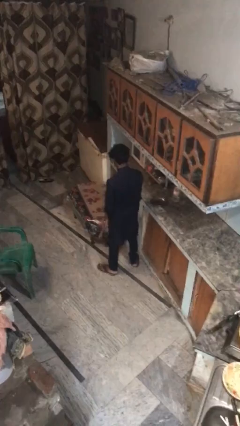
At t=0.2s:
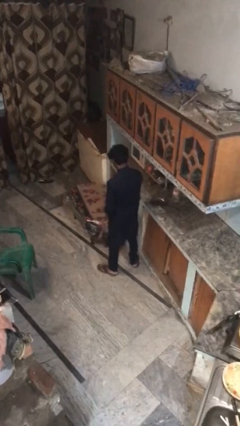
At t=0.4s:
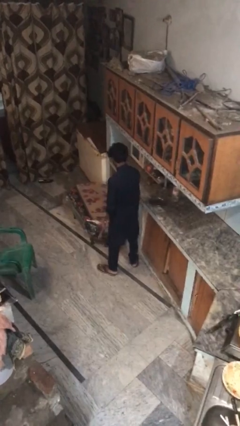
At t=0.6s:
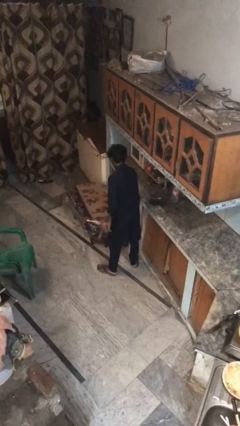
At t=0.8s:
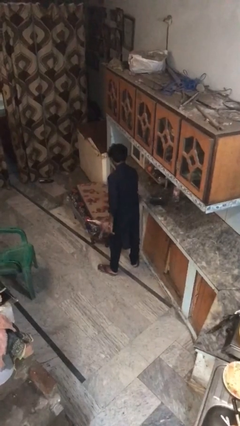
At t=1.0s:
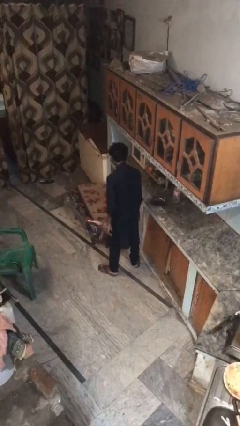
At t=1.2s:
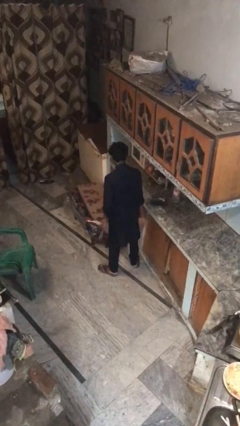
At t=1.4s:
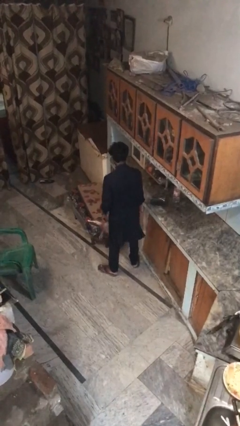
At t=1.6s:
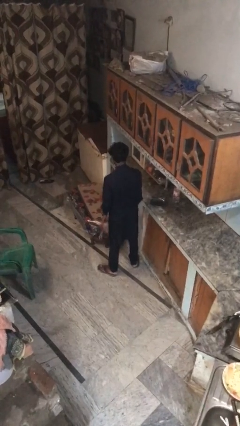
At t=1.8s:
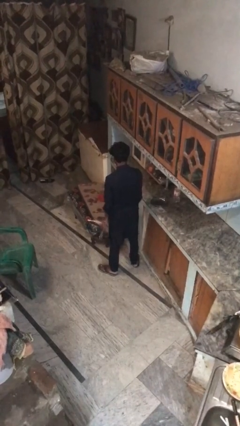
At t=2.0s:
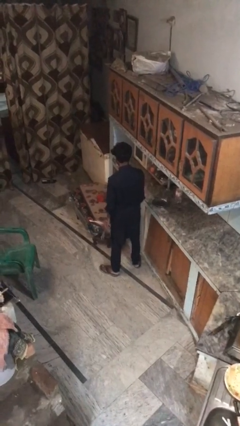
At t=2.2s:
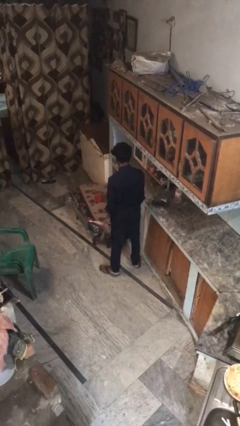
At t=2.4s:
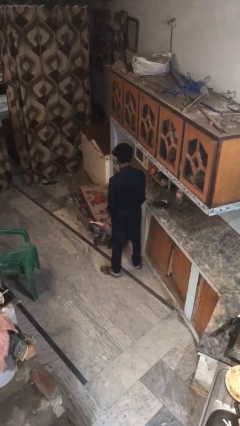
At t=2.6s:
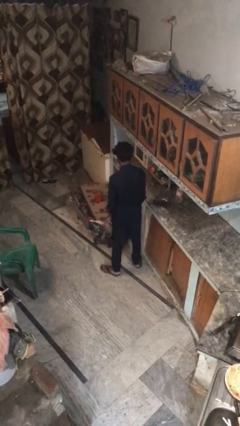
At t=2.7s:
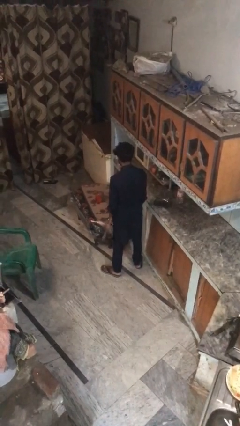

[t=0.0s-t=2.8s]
person throws object on table

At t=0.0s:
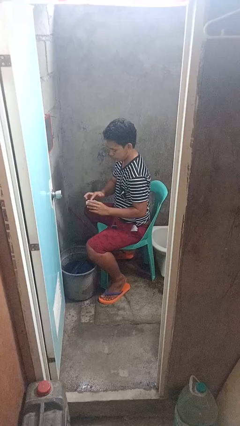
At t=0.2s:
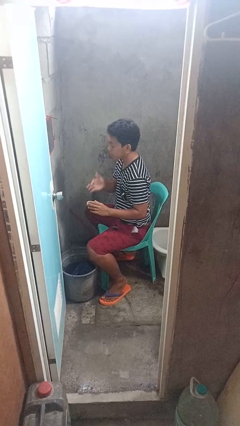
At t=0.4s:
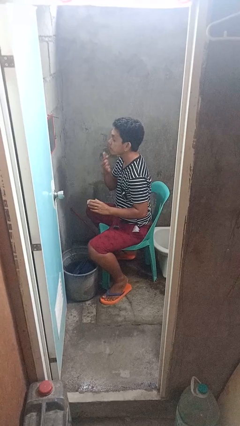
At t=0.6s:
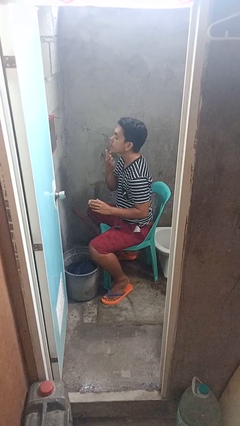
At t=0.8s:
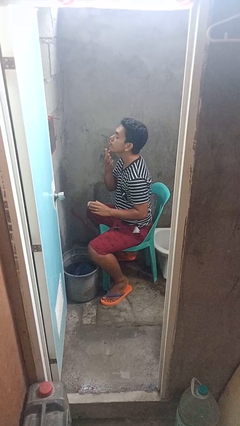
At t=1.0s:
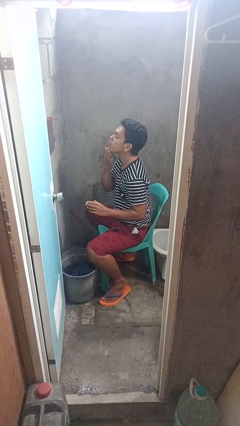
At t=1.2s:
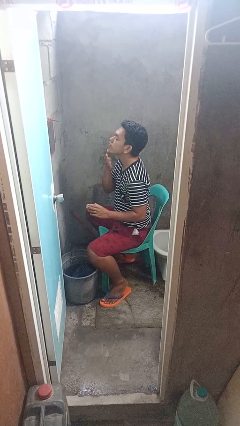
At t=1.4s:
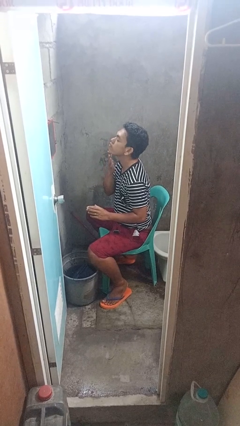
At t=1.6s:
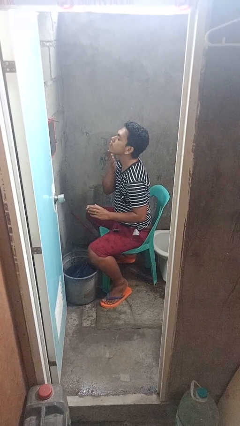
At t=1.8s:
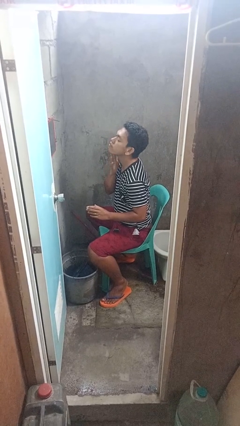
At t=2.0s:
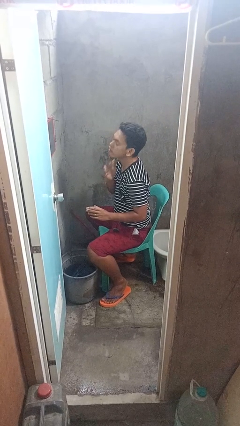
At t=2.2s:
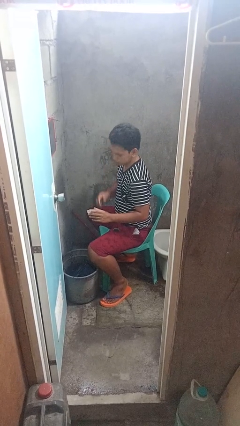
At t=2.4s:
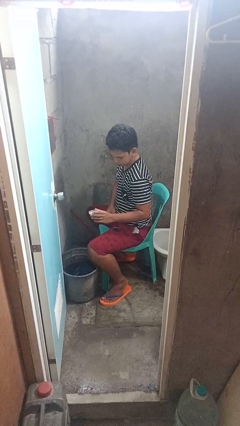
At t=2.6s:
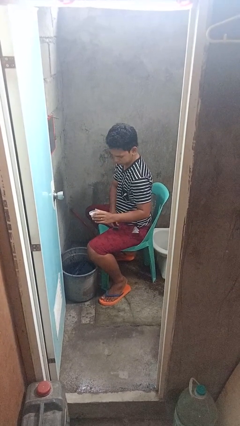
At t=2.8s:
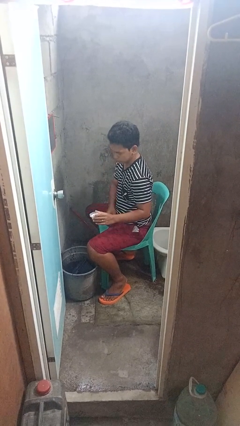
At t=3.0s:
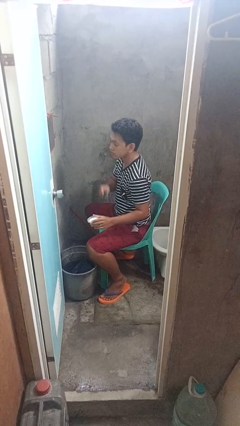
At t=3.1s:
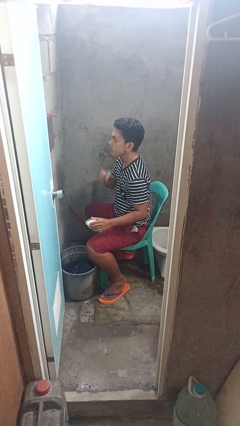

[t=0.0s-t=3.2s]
person applies shaving cream

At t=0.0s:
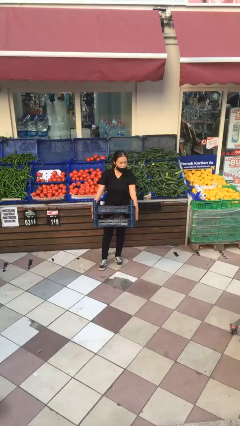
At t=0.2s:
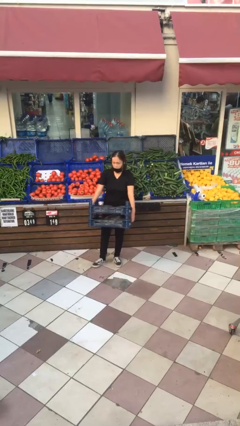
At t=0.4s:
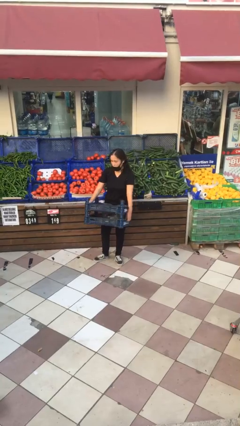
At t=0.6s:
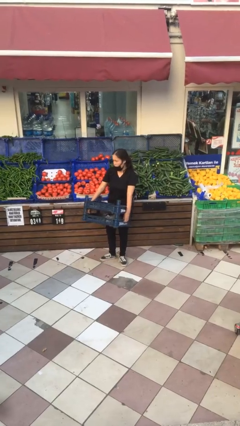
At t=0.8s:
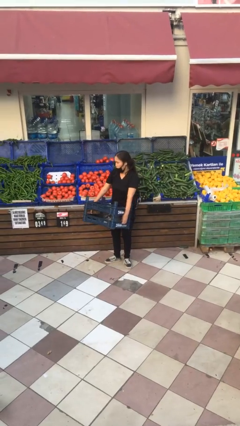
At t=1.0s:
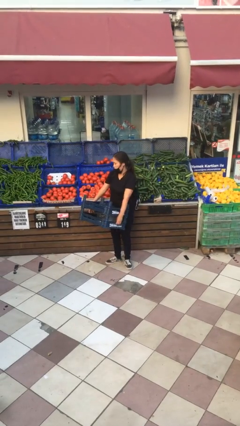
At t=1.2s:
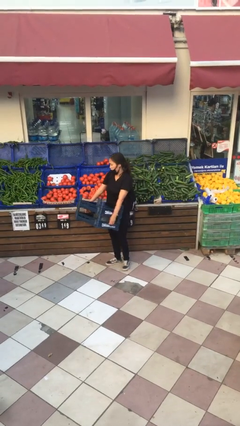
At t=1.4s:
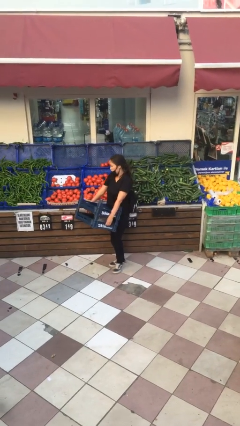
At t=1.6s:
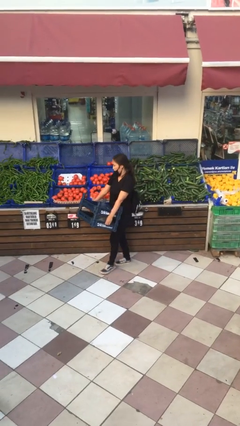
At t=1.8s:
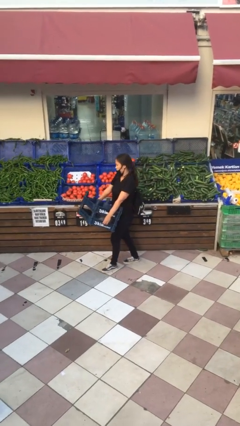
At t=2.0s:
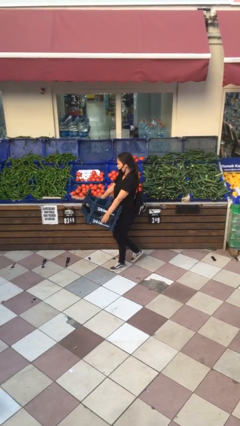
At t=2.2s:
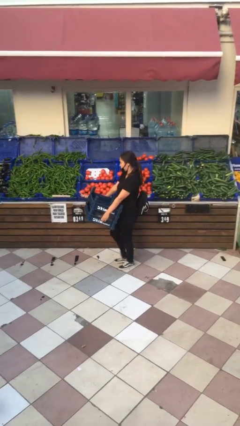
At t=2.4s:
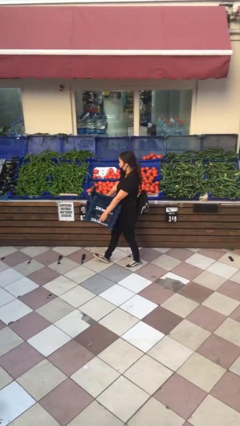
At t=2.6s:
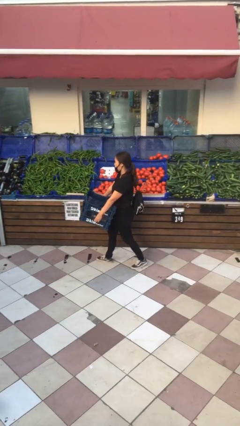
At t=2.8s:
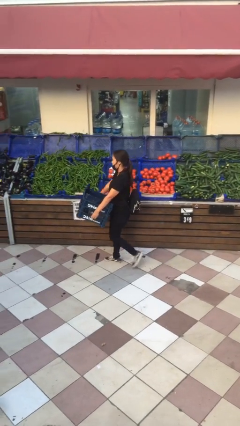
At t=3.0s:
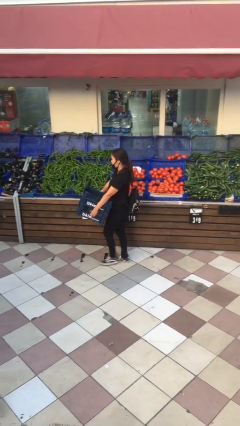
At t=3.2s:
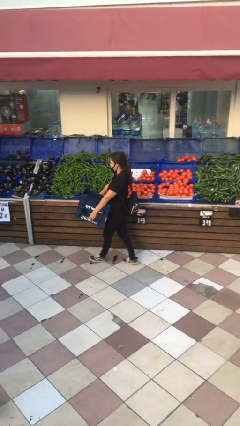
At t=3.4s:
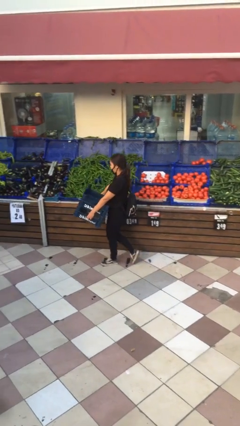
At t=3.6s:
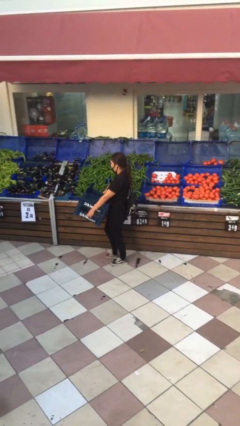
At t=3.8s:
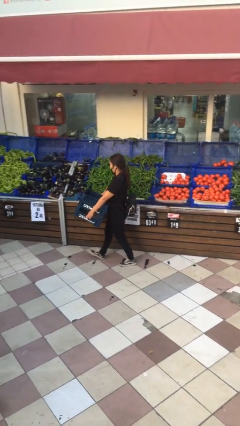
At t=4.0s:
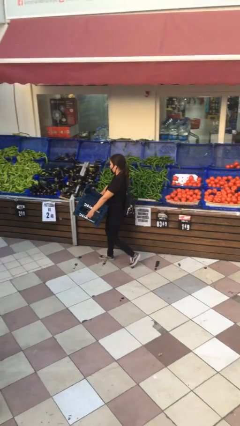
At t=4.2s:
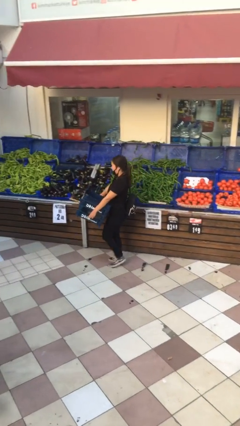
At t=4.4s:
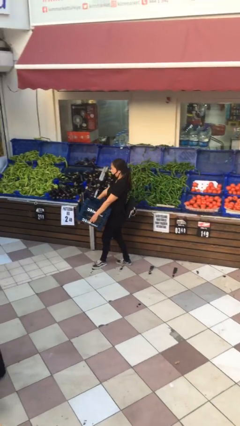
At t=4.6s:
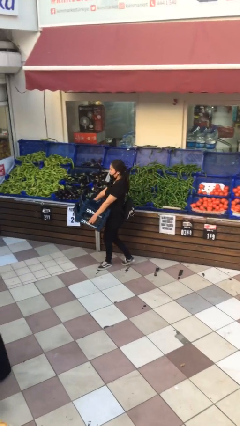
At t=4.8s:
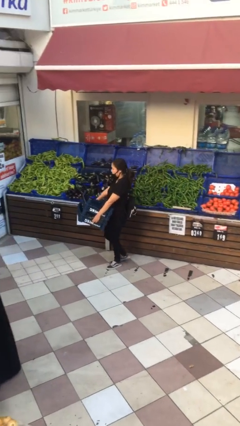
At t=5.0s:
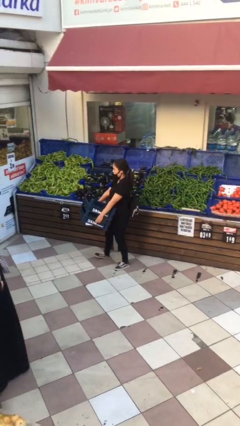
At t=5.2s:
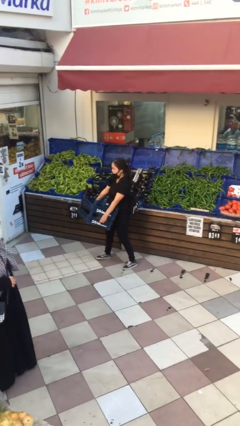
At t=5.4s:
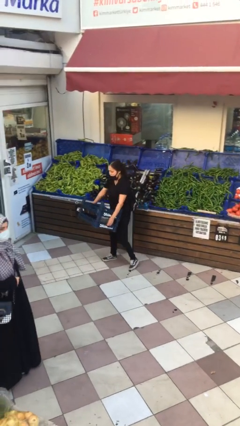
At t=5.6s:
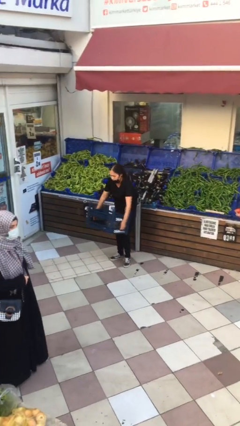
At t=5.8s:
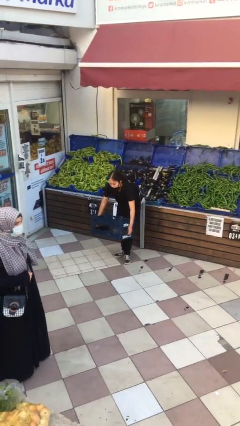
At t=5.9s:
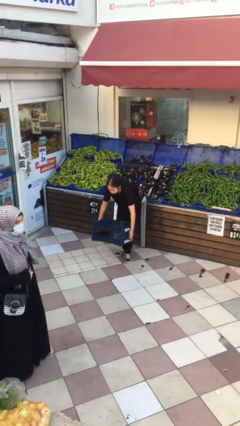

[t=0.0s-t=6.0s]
person carries heavy object

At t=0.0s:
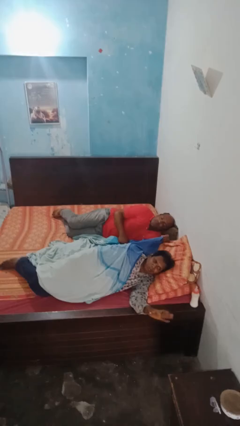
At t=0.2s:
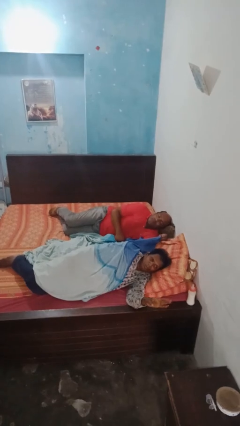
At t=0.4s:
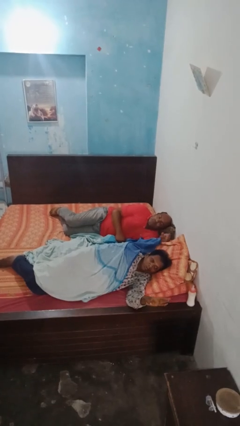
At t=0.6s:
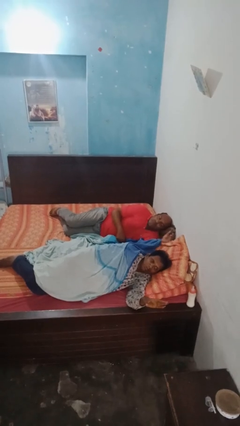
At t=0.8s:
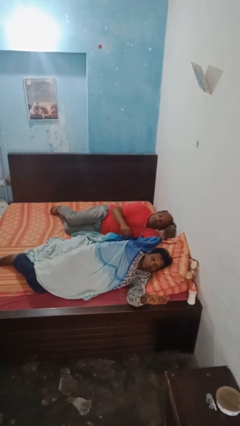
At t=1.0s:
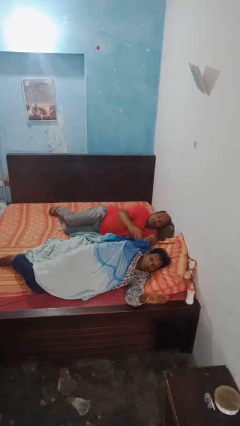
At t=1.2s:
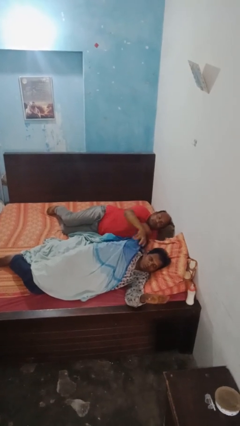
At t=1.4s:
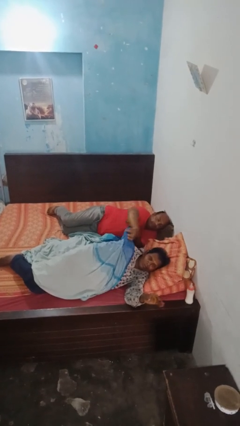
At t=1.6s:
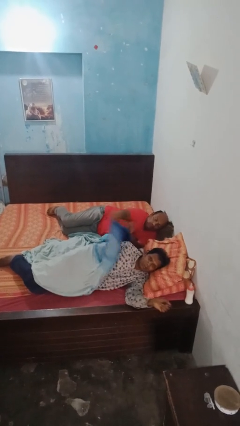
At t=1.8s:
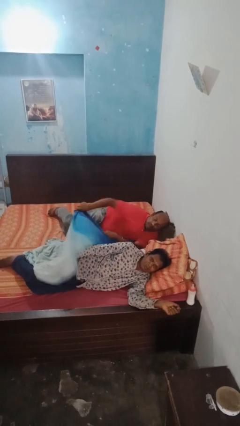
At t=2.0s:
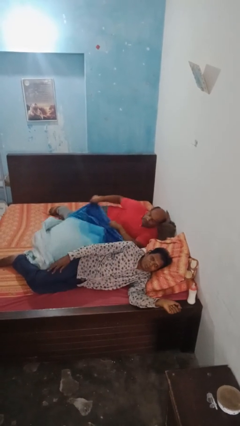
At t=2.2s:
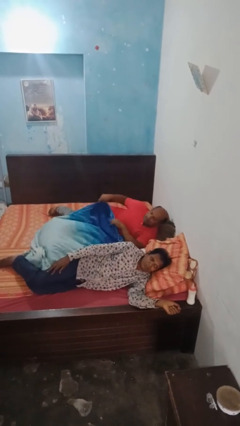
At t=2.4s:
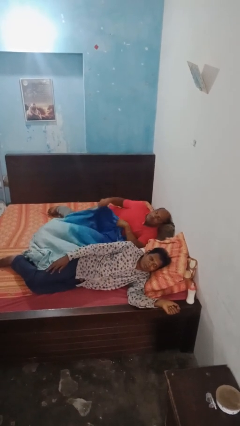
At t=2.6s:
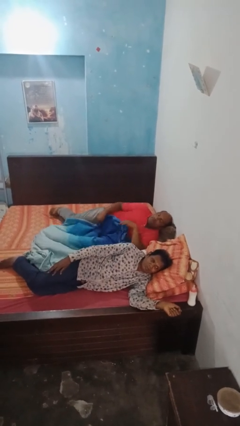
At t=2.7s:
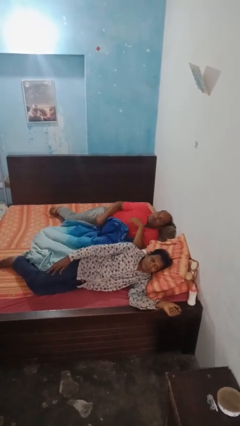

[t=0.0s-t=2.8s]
person uncovers friend with blanket

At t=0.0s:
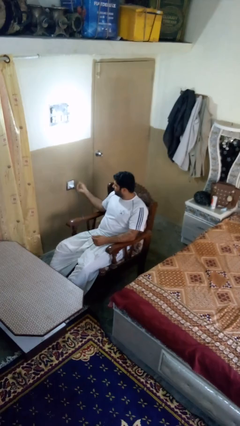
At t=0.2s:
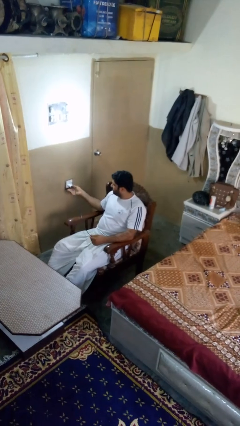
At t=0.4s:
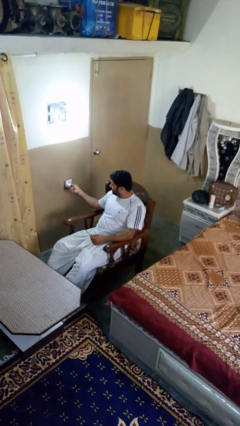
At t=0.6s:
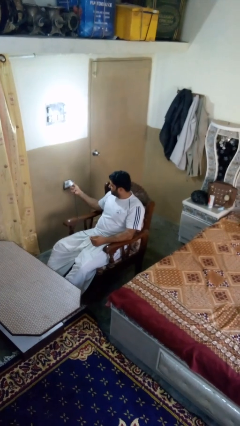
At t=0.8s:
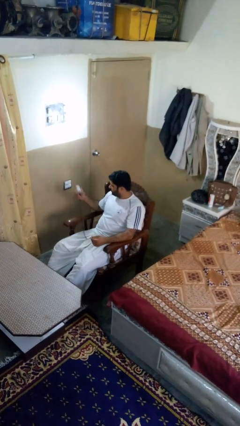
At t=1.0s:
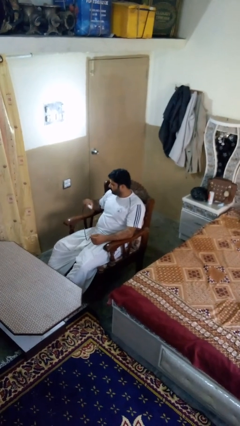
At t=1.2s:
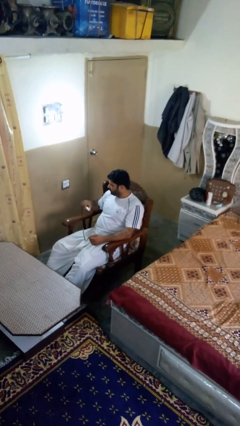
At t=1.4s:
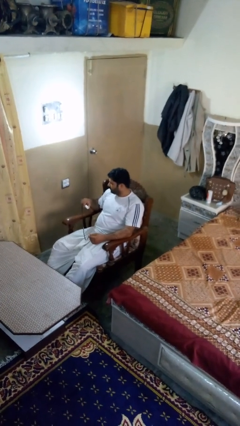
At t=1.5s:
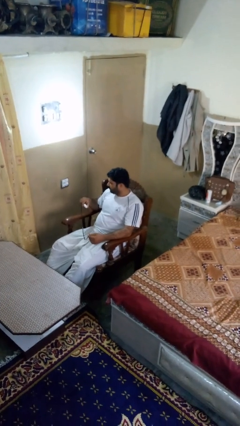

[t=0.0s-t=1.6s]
person unplugs from electrical socket

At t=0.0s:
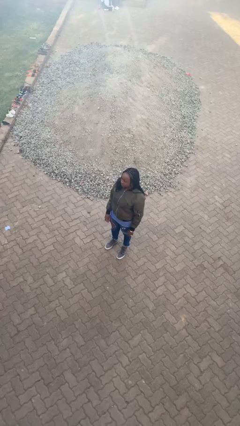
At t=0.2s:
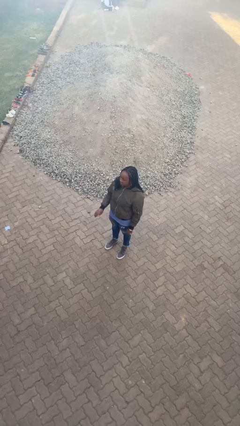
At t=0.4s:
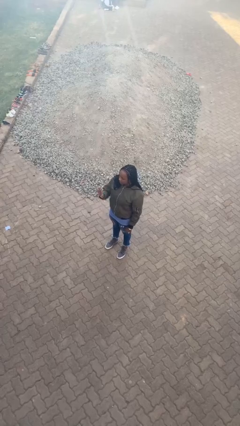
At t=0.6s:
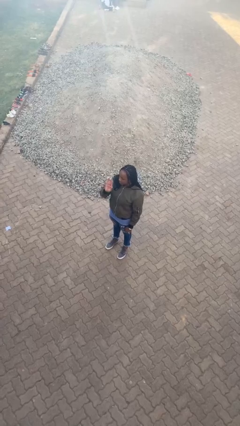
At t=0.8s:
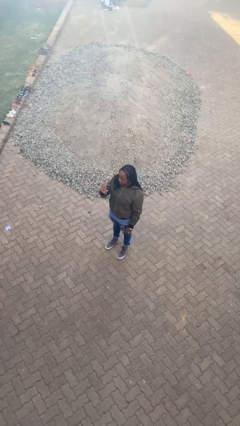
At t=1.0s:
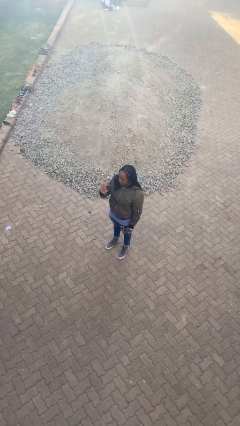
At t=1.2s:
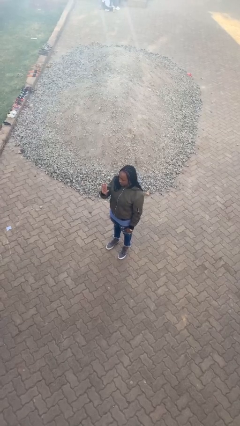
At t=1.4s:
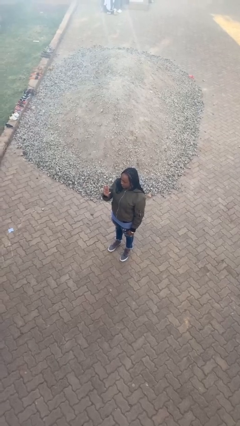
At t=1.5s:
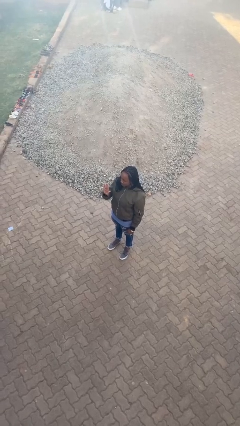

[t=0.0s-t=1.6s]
person gestures stop
